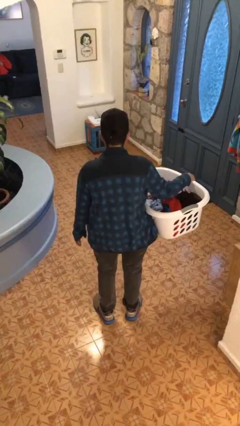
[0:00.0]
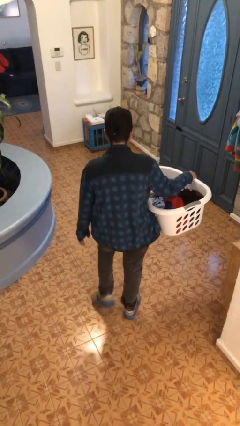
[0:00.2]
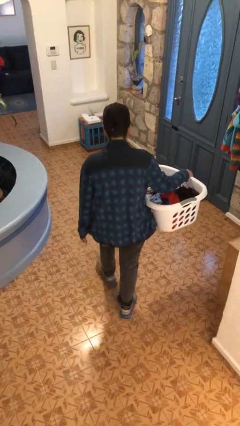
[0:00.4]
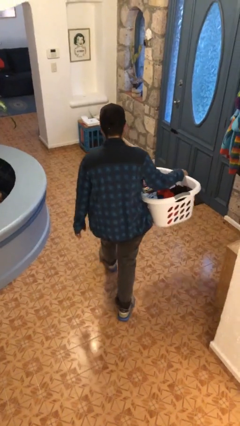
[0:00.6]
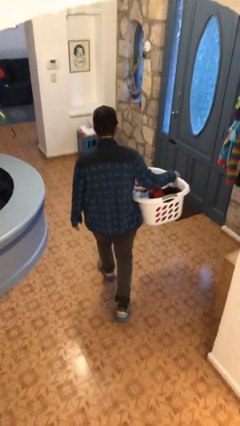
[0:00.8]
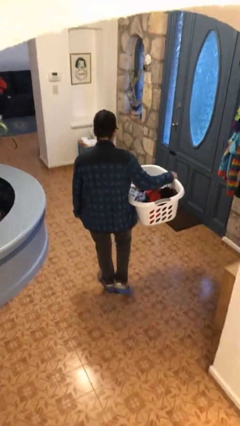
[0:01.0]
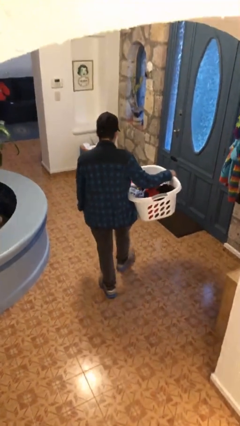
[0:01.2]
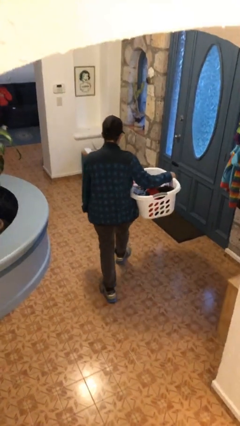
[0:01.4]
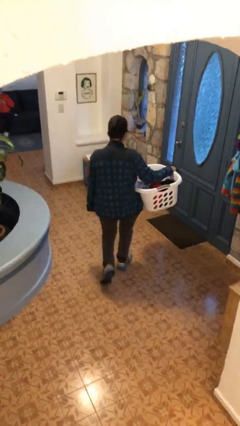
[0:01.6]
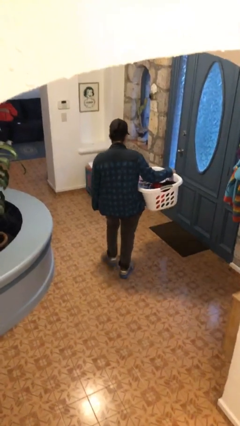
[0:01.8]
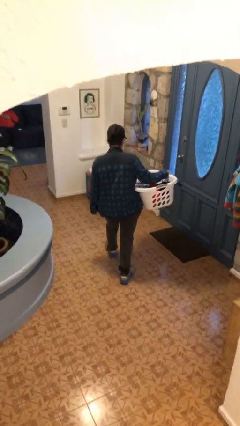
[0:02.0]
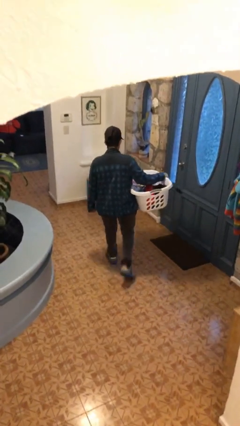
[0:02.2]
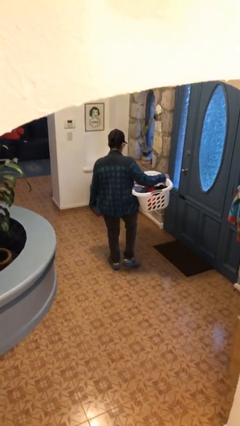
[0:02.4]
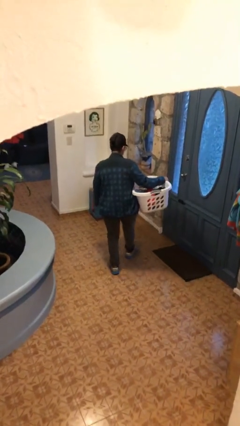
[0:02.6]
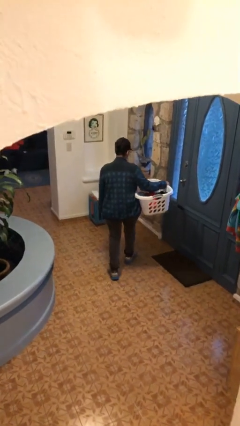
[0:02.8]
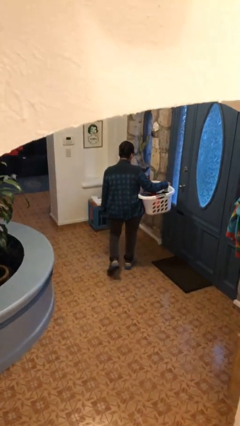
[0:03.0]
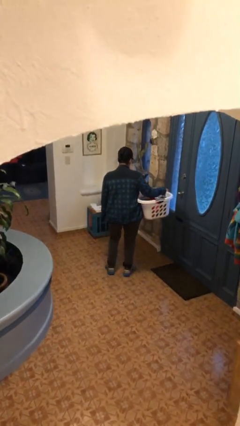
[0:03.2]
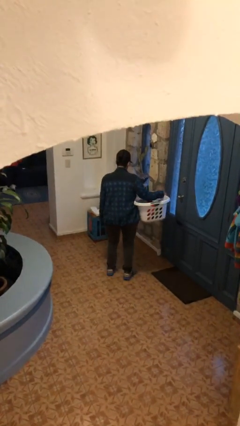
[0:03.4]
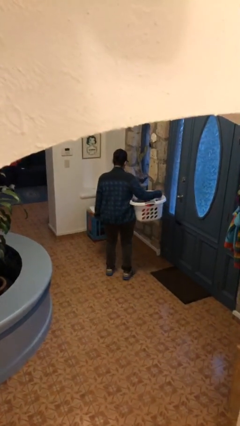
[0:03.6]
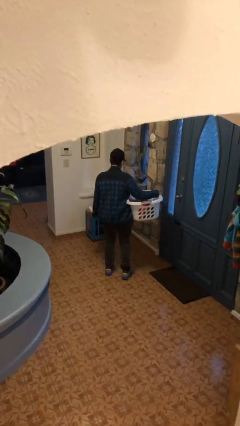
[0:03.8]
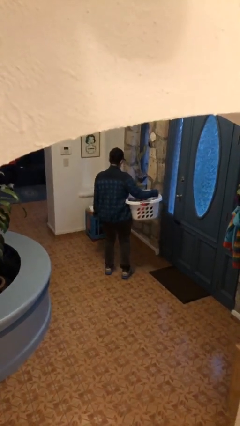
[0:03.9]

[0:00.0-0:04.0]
person carries laundry basket

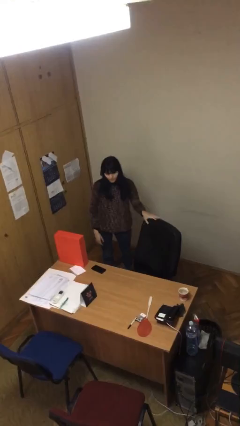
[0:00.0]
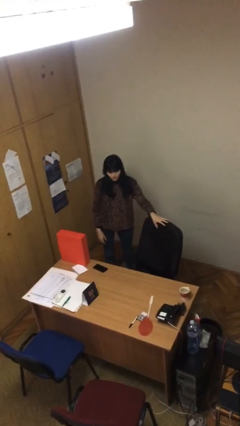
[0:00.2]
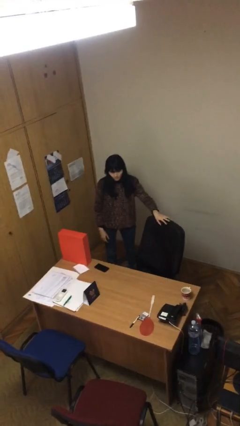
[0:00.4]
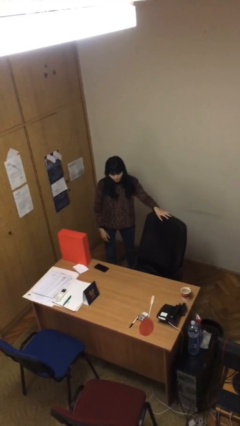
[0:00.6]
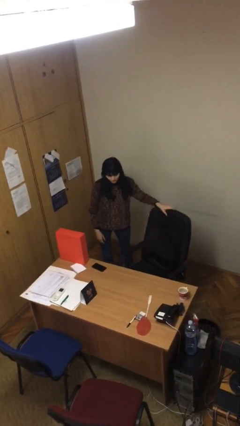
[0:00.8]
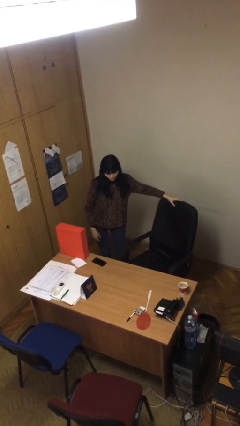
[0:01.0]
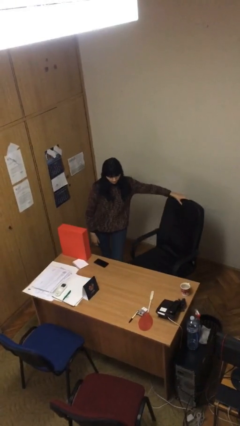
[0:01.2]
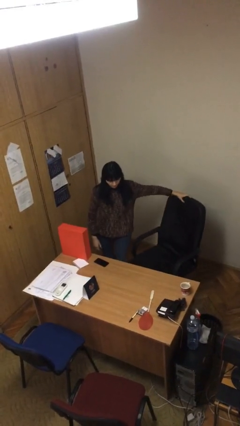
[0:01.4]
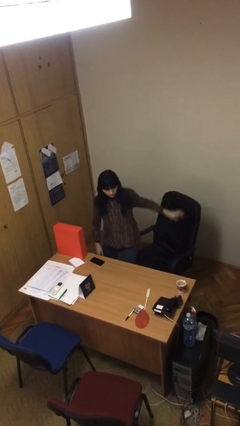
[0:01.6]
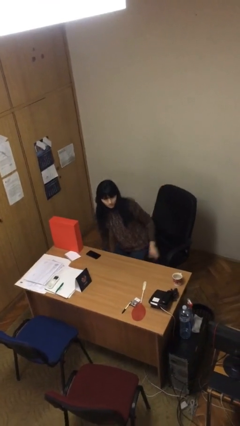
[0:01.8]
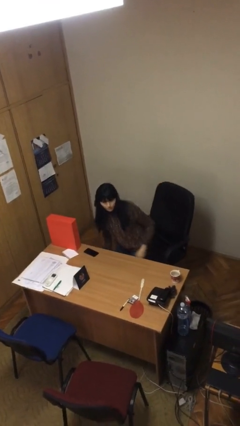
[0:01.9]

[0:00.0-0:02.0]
person sits down

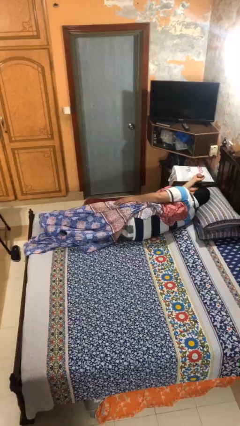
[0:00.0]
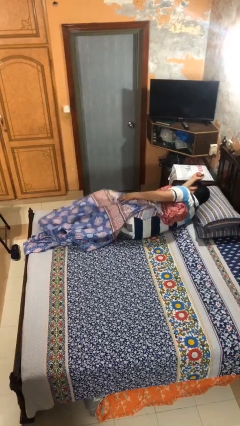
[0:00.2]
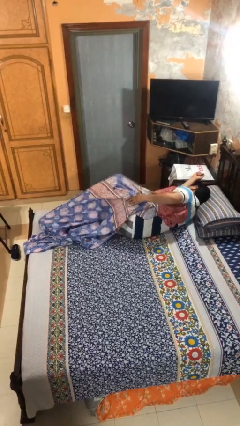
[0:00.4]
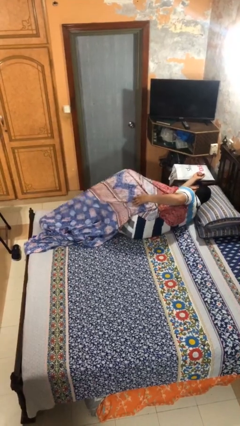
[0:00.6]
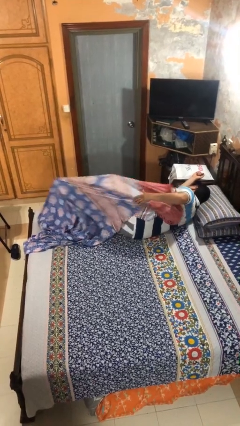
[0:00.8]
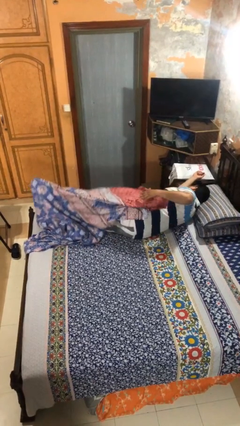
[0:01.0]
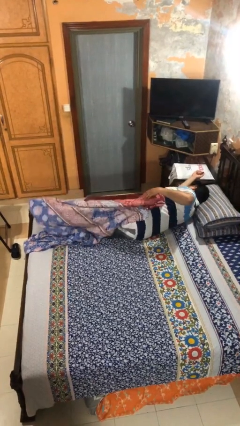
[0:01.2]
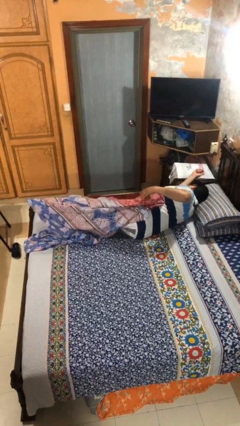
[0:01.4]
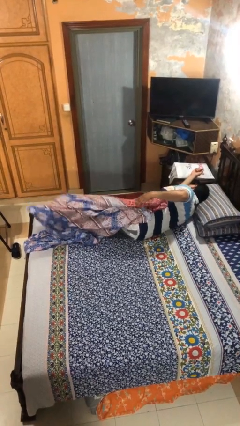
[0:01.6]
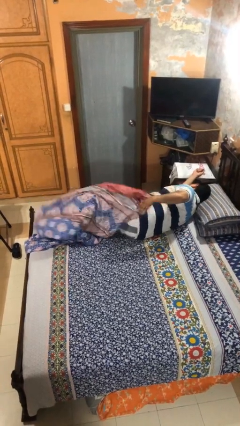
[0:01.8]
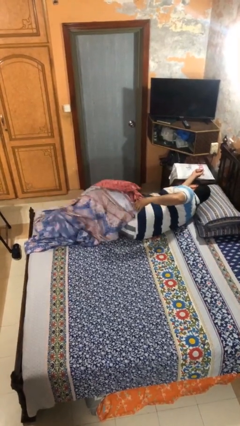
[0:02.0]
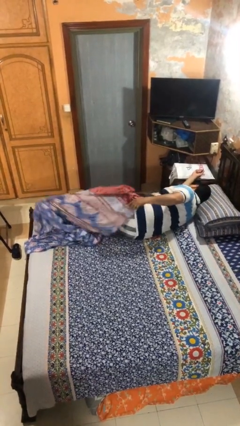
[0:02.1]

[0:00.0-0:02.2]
person uncovers with bedsheets

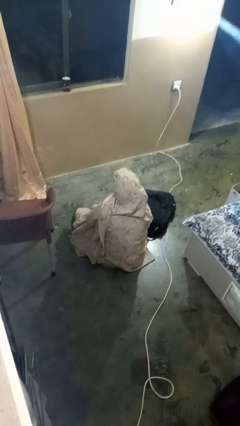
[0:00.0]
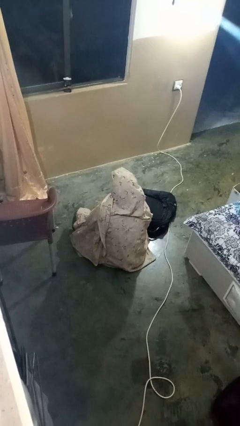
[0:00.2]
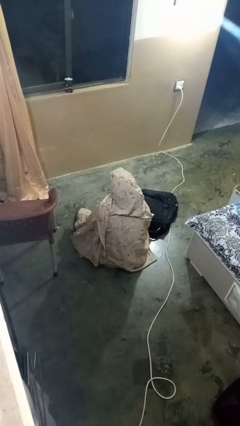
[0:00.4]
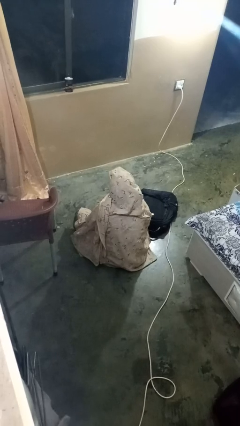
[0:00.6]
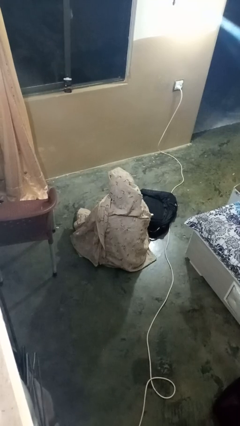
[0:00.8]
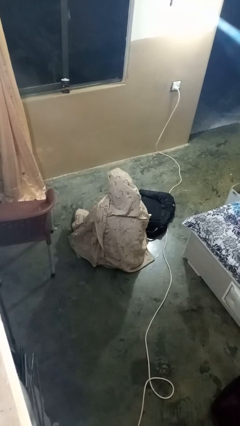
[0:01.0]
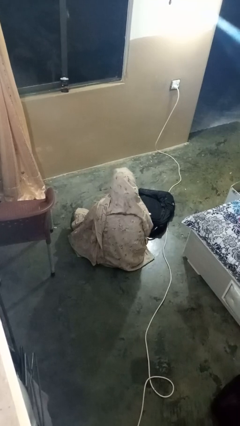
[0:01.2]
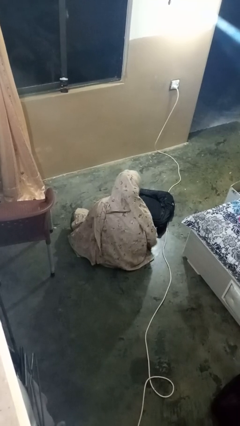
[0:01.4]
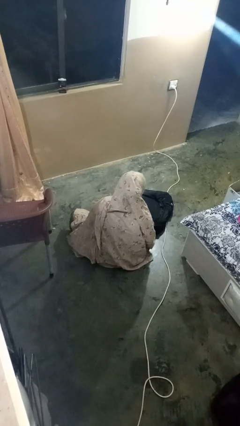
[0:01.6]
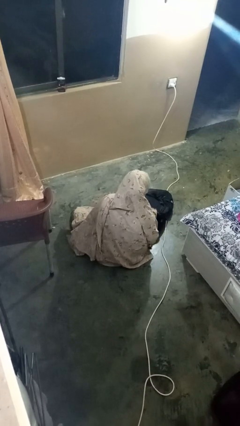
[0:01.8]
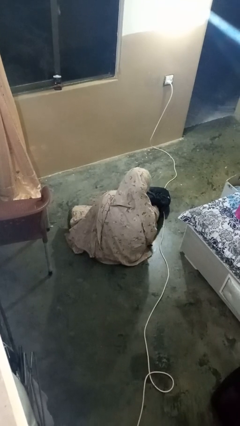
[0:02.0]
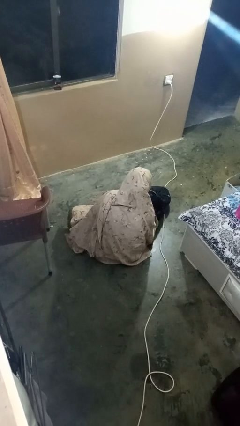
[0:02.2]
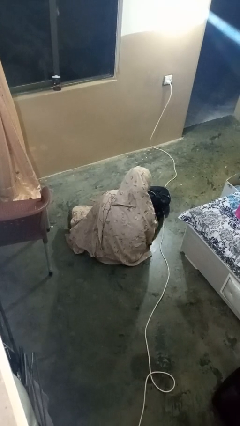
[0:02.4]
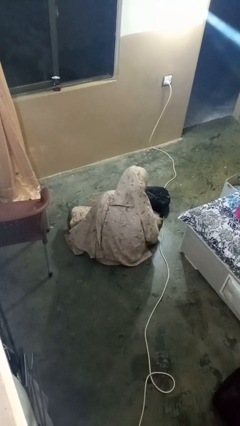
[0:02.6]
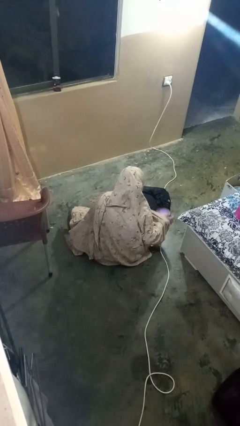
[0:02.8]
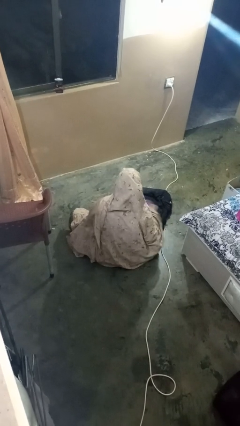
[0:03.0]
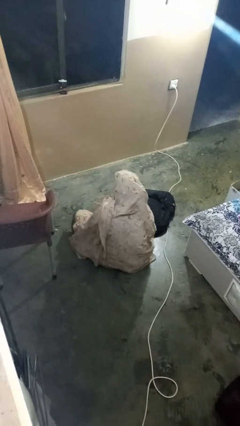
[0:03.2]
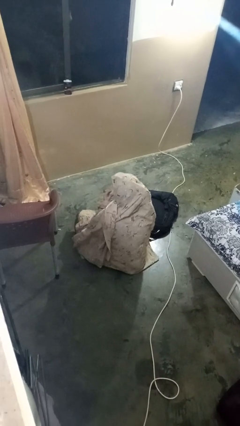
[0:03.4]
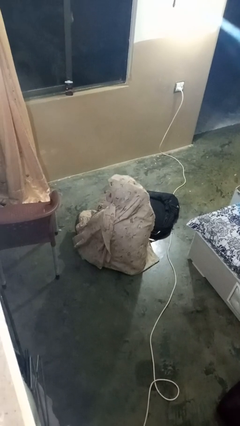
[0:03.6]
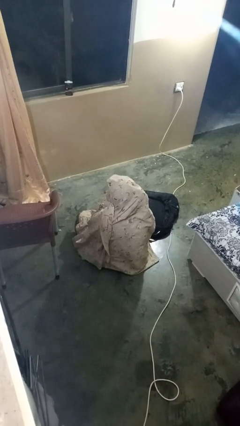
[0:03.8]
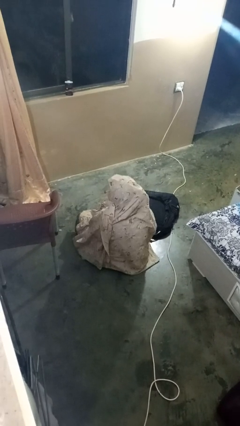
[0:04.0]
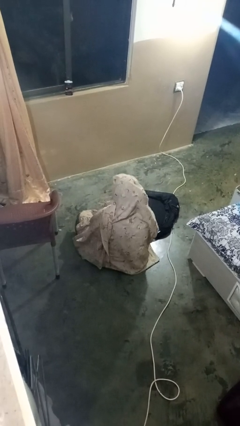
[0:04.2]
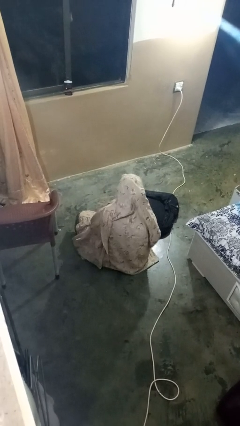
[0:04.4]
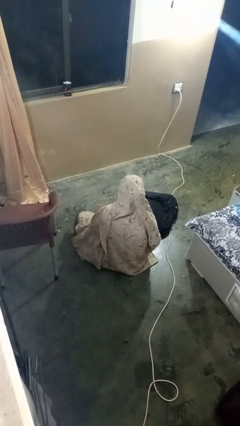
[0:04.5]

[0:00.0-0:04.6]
person eats snack from bag

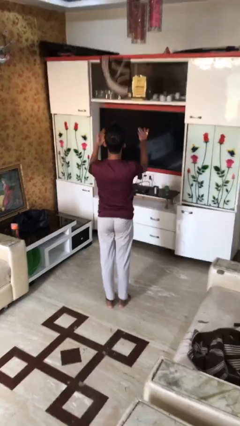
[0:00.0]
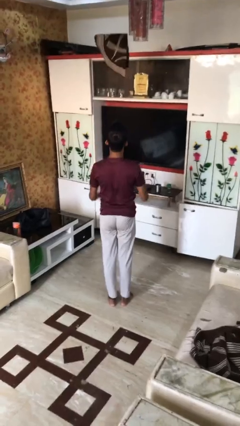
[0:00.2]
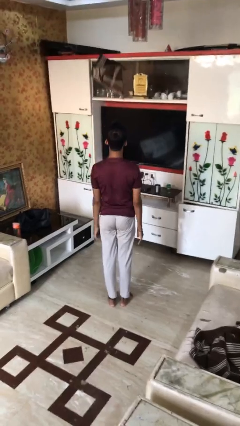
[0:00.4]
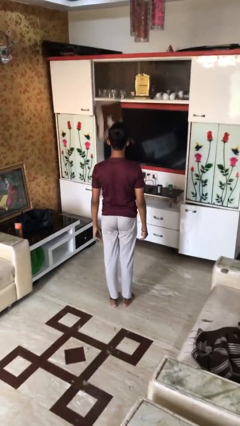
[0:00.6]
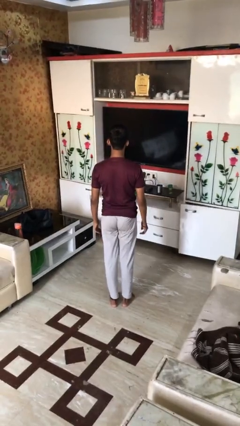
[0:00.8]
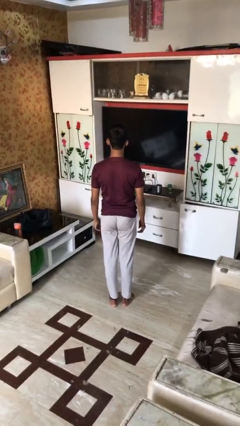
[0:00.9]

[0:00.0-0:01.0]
person throws object into air

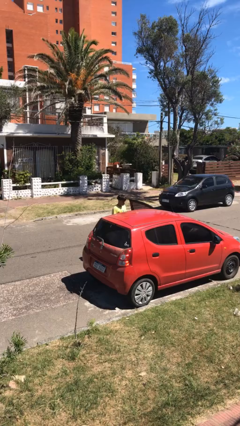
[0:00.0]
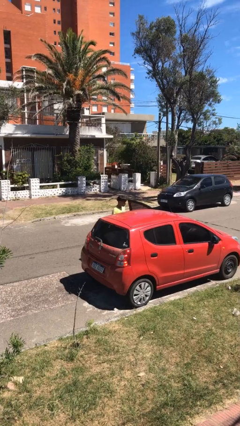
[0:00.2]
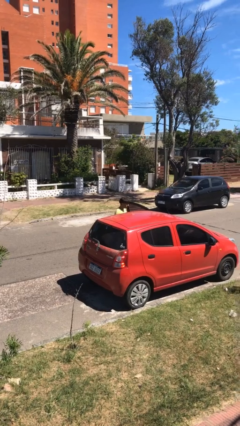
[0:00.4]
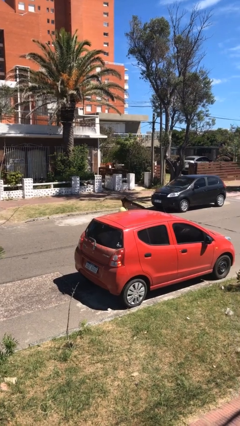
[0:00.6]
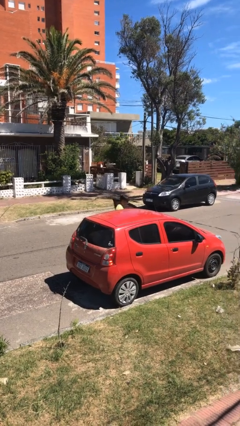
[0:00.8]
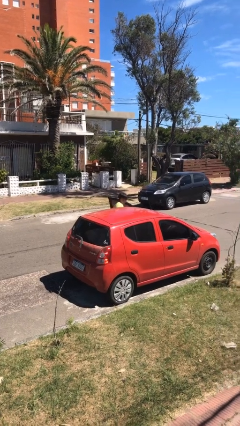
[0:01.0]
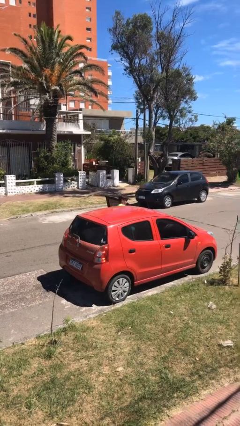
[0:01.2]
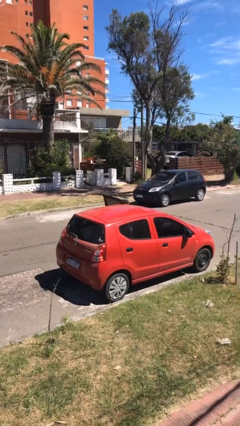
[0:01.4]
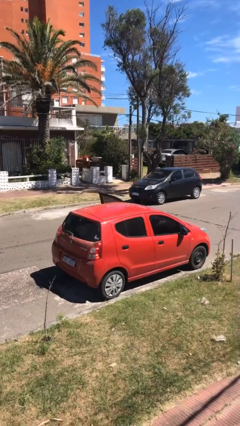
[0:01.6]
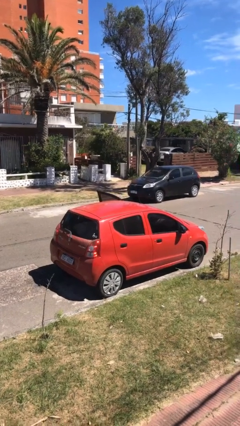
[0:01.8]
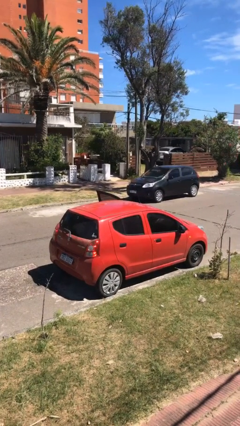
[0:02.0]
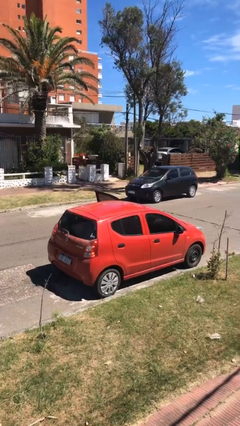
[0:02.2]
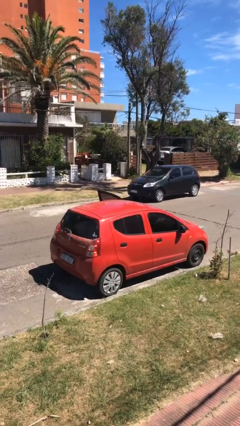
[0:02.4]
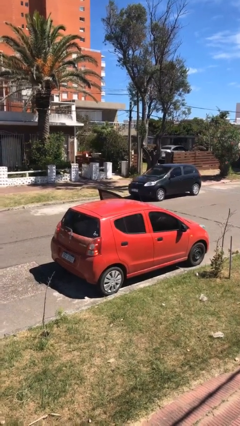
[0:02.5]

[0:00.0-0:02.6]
person enters car

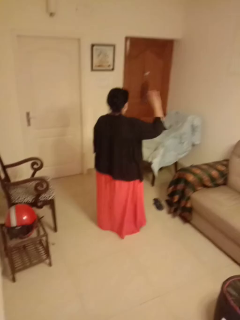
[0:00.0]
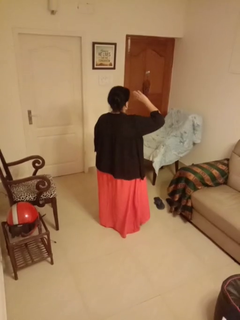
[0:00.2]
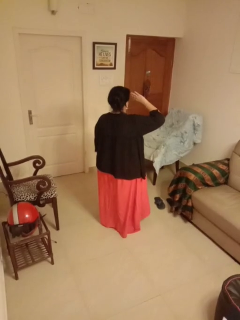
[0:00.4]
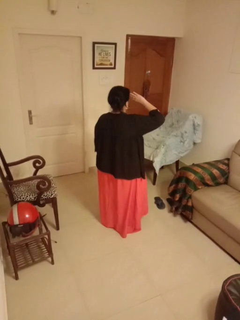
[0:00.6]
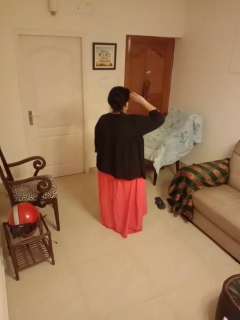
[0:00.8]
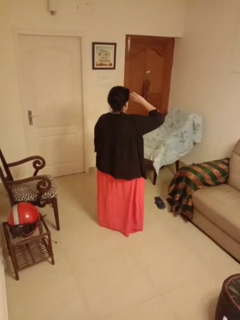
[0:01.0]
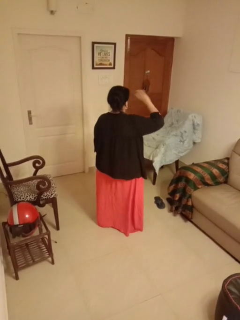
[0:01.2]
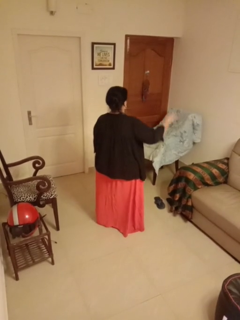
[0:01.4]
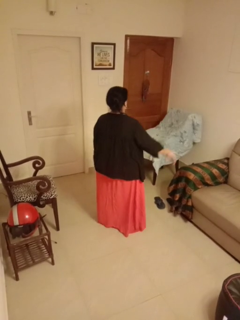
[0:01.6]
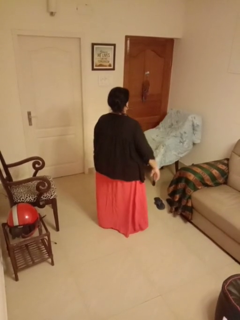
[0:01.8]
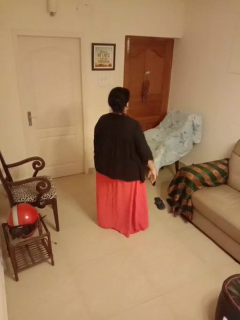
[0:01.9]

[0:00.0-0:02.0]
person salutes
